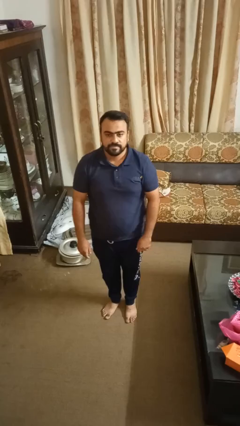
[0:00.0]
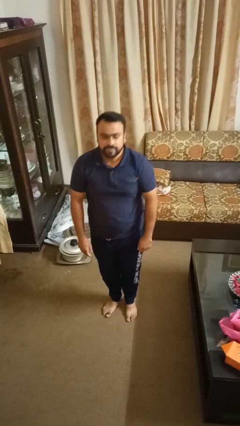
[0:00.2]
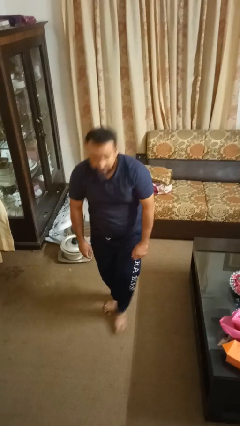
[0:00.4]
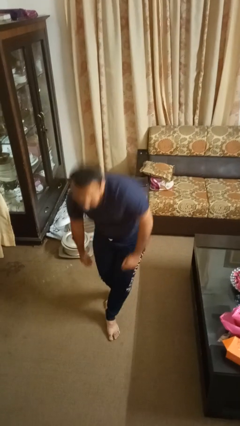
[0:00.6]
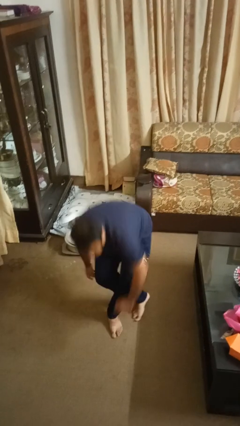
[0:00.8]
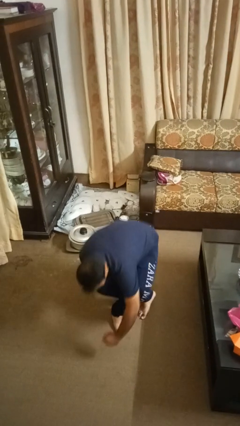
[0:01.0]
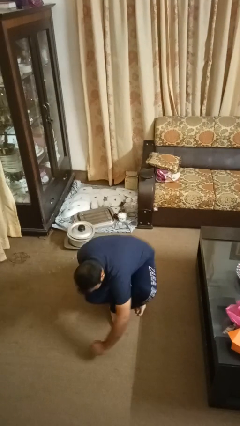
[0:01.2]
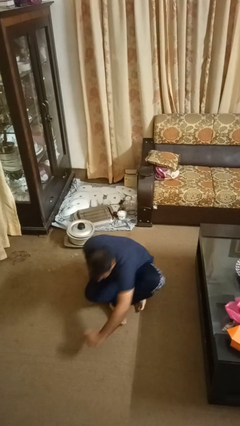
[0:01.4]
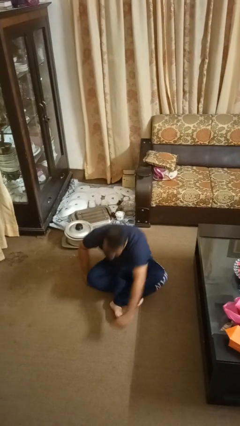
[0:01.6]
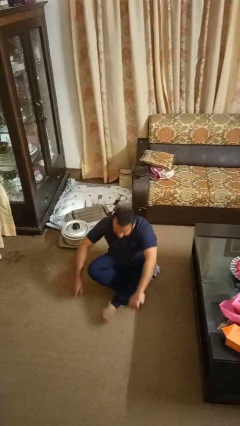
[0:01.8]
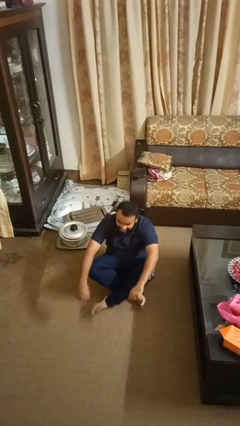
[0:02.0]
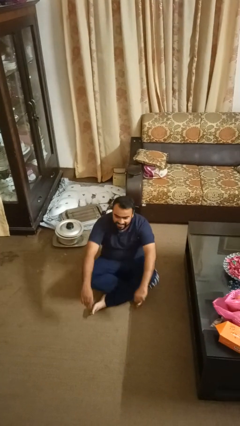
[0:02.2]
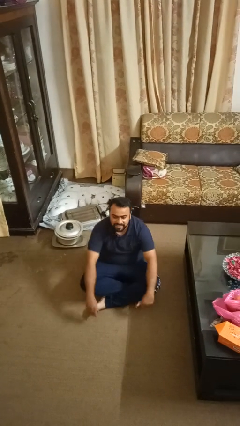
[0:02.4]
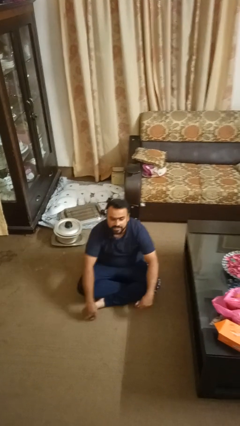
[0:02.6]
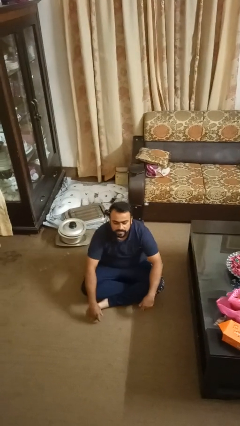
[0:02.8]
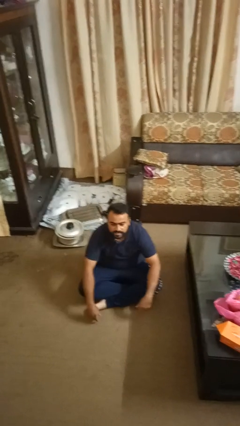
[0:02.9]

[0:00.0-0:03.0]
person sits crisscross

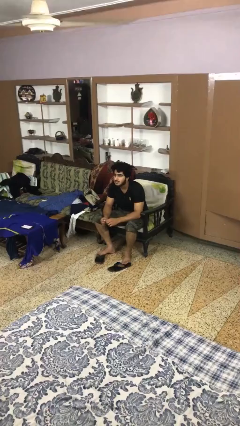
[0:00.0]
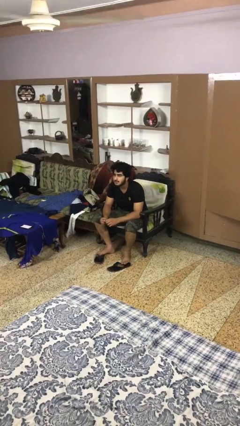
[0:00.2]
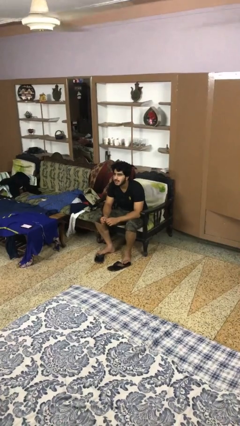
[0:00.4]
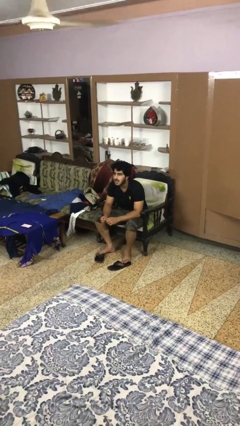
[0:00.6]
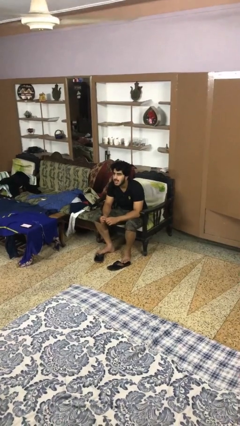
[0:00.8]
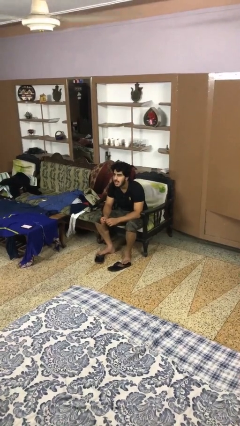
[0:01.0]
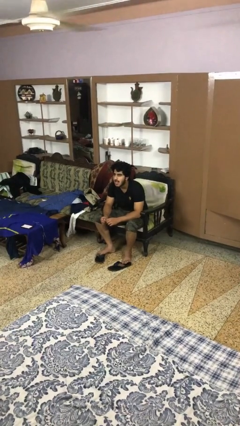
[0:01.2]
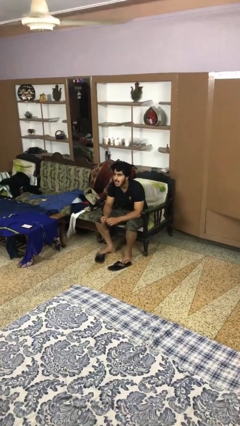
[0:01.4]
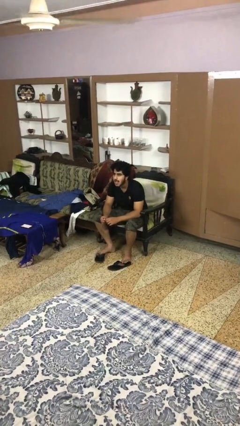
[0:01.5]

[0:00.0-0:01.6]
person sticks out tongue

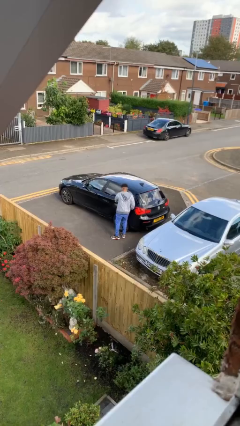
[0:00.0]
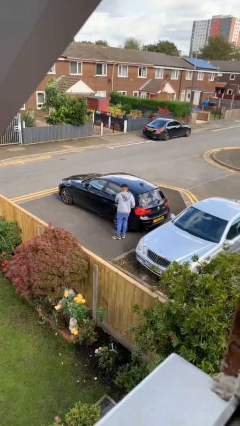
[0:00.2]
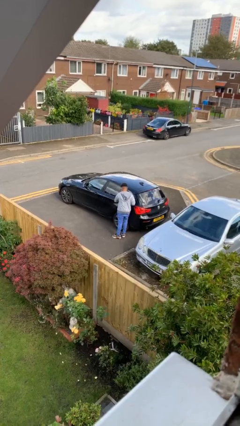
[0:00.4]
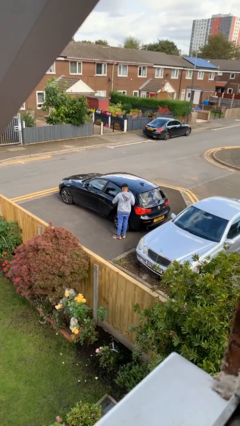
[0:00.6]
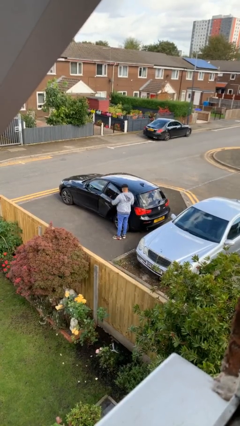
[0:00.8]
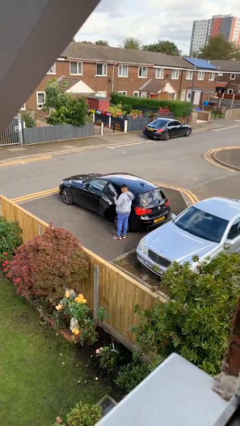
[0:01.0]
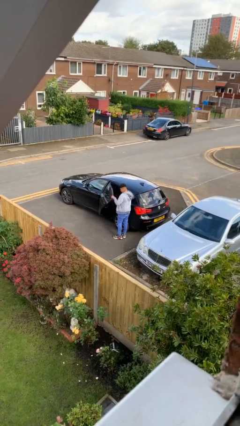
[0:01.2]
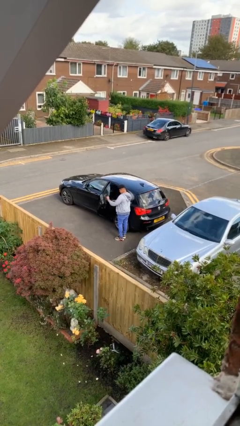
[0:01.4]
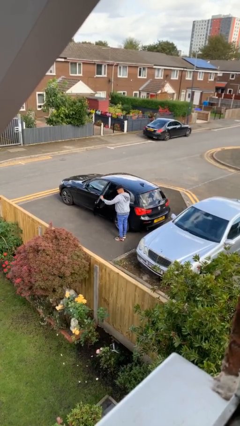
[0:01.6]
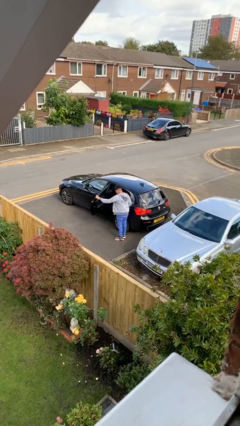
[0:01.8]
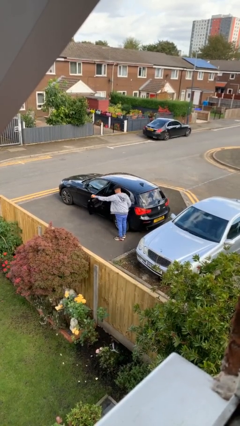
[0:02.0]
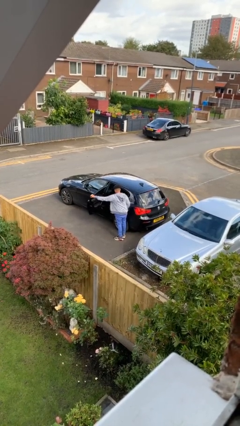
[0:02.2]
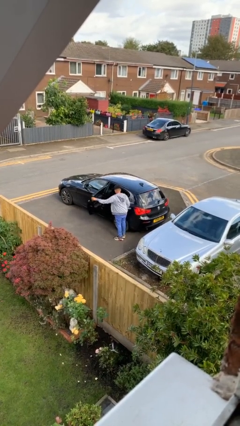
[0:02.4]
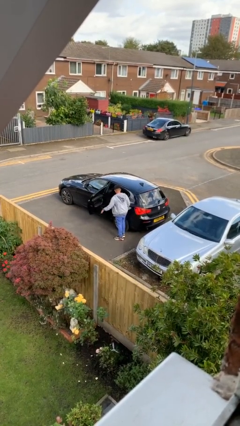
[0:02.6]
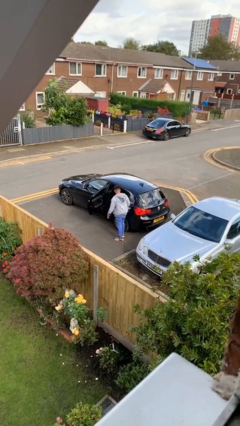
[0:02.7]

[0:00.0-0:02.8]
person opens car door

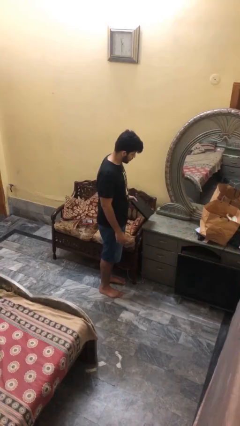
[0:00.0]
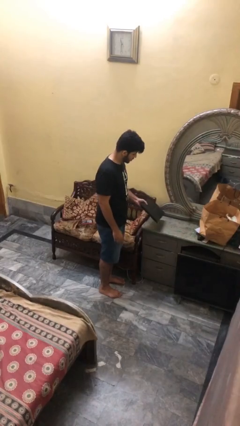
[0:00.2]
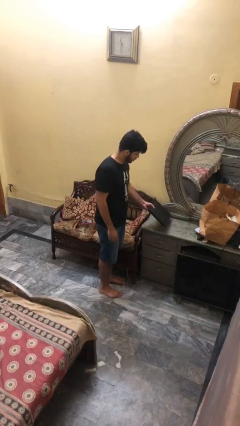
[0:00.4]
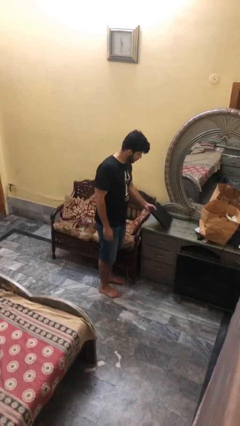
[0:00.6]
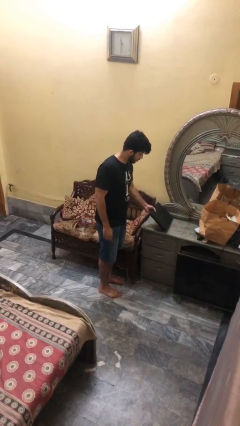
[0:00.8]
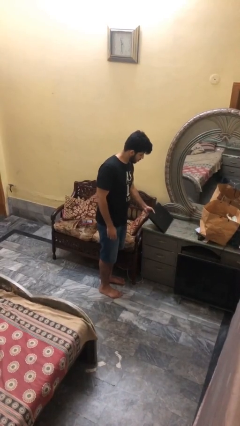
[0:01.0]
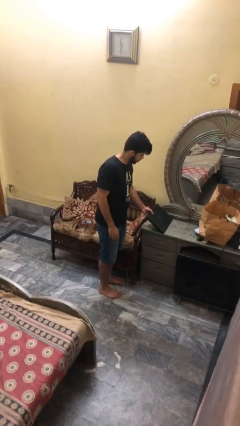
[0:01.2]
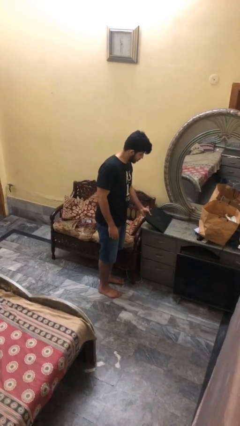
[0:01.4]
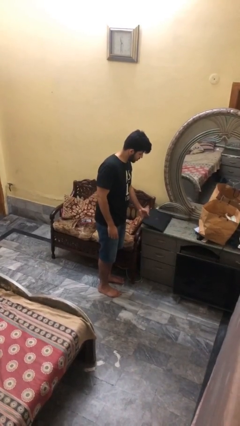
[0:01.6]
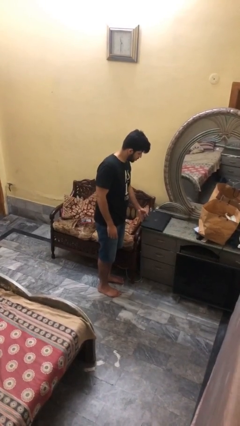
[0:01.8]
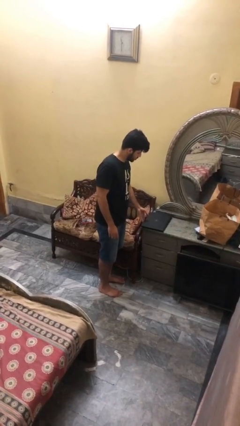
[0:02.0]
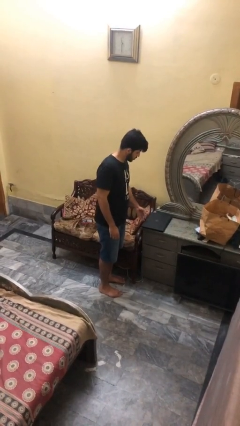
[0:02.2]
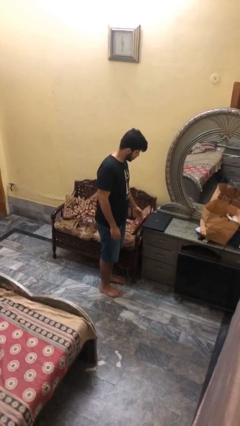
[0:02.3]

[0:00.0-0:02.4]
person puts down object on countertop

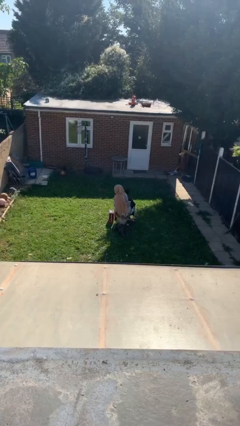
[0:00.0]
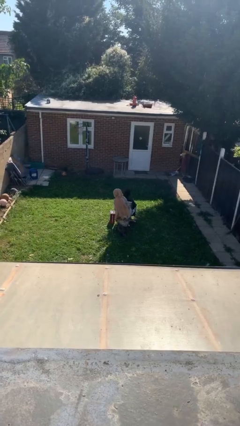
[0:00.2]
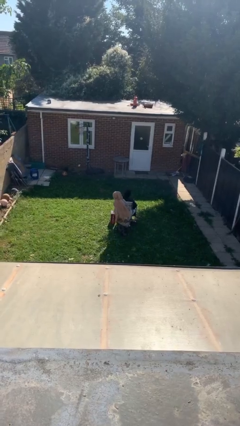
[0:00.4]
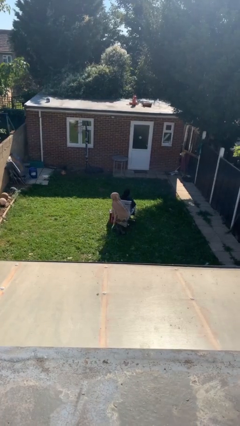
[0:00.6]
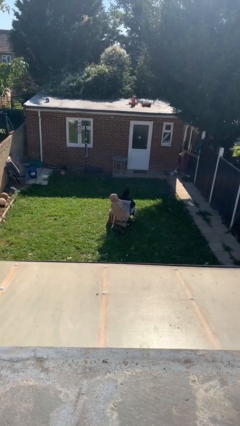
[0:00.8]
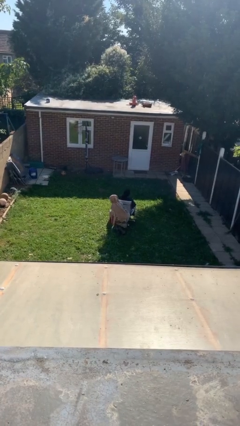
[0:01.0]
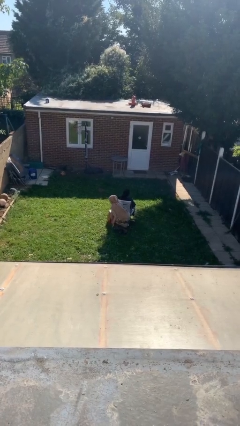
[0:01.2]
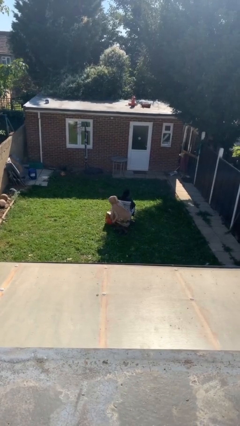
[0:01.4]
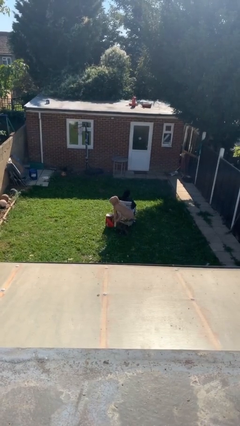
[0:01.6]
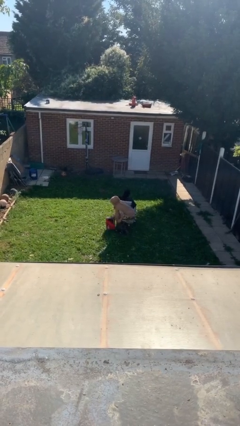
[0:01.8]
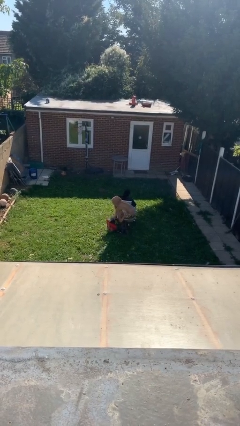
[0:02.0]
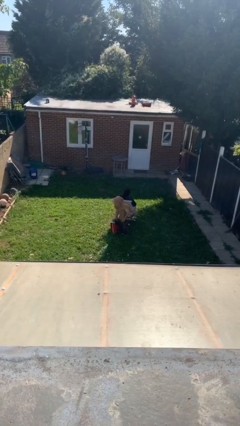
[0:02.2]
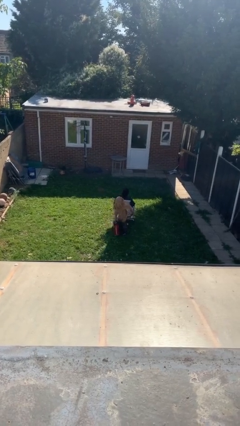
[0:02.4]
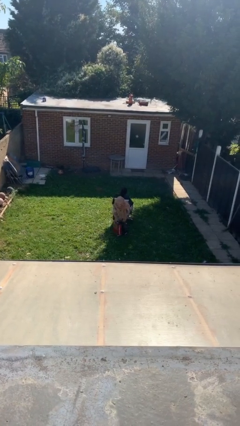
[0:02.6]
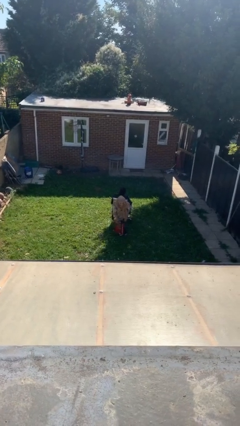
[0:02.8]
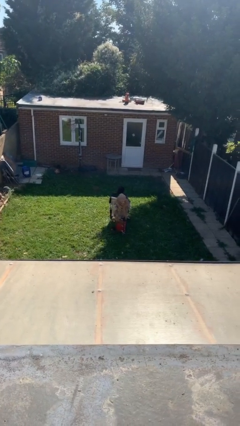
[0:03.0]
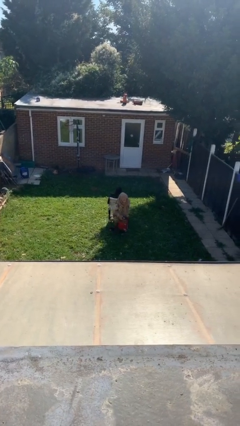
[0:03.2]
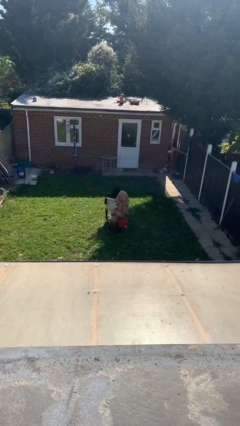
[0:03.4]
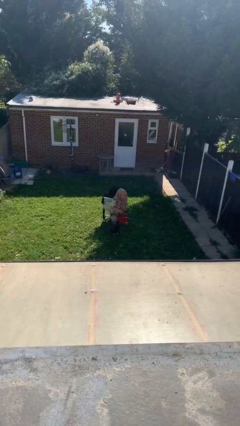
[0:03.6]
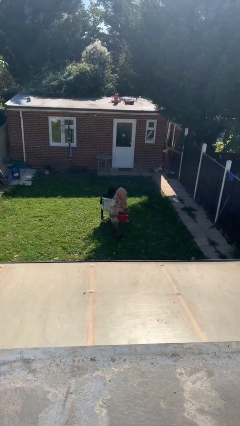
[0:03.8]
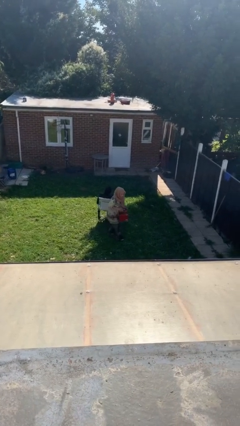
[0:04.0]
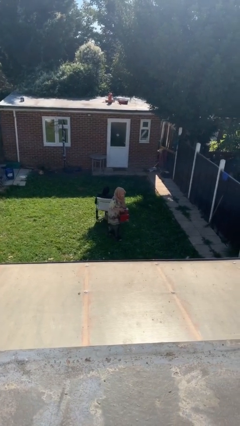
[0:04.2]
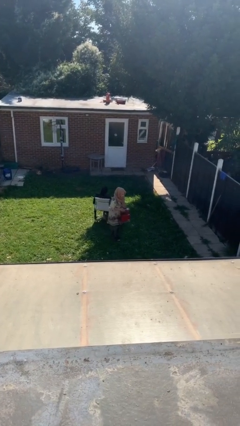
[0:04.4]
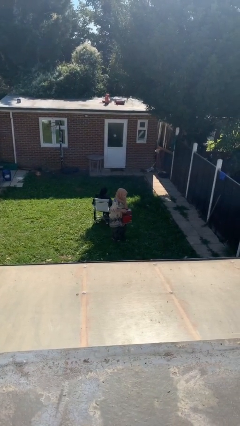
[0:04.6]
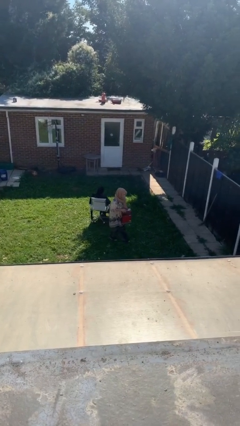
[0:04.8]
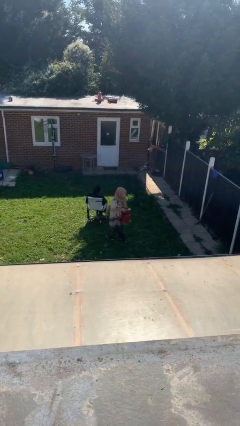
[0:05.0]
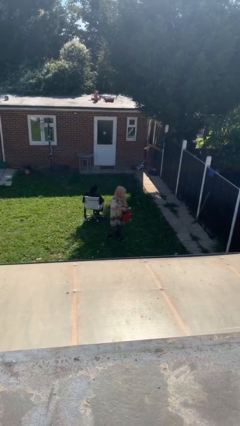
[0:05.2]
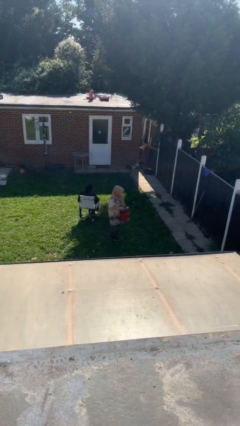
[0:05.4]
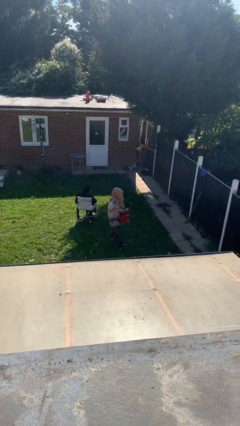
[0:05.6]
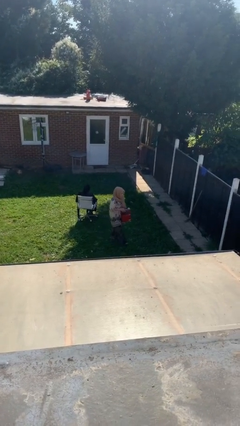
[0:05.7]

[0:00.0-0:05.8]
person steals object from person

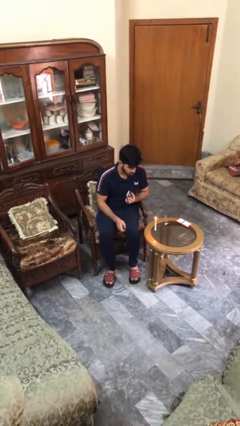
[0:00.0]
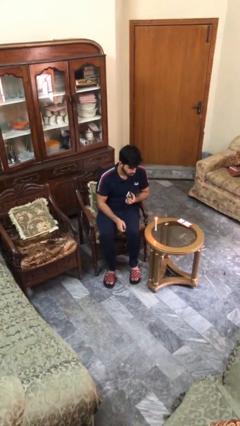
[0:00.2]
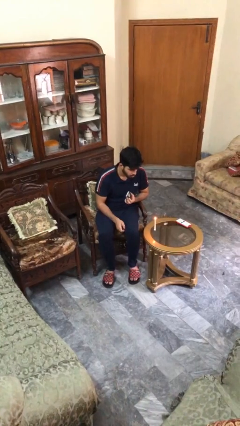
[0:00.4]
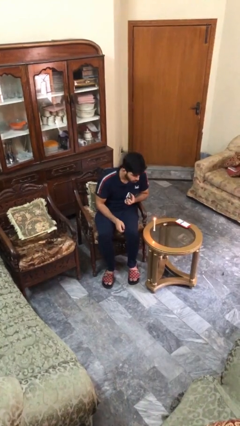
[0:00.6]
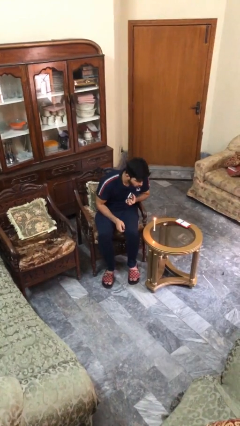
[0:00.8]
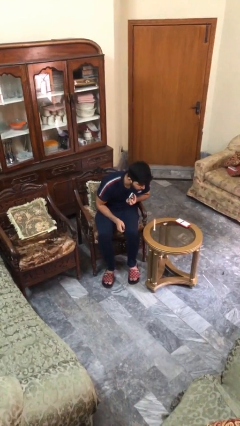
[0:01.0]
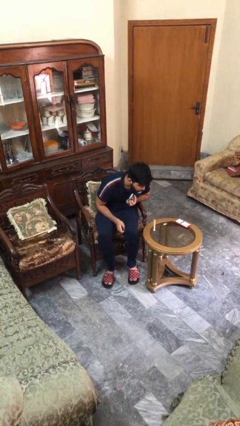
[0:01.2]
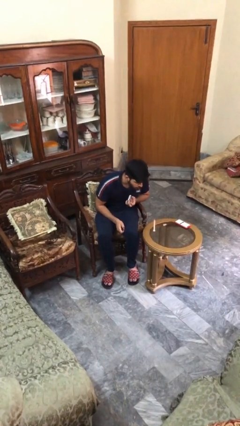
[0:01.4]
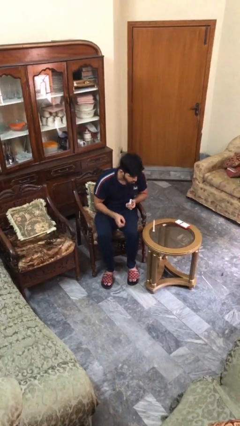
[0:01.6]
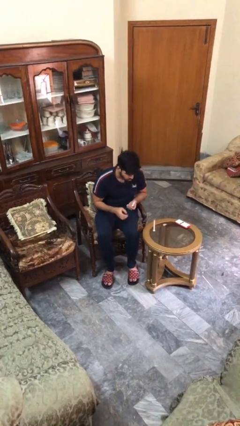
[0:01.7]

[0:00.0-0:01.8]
person extinguishes candle
